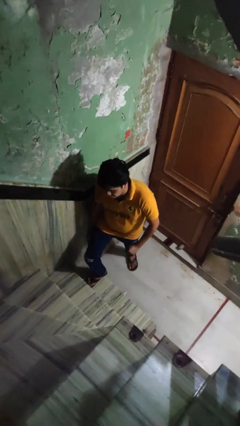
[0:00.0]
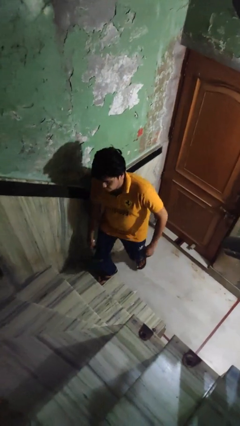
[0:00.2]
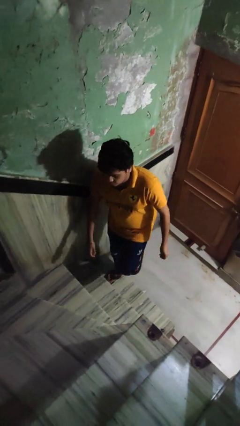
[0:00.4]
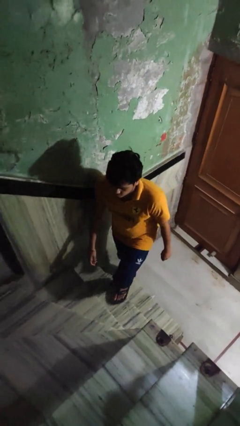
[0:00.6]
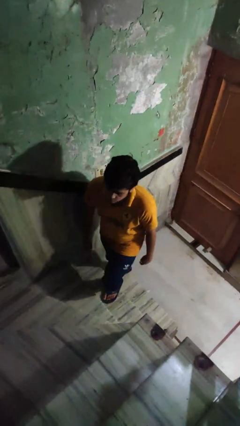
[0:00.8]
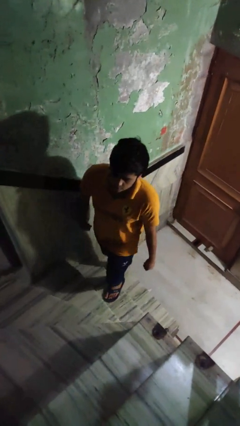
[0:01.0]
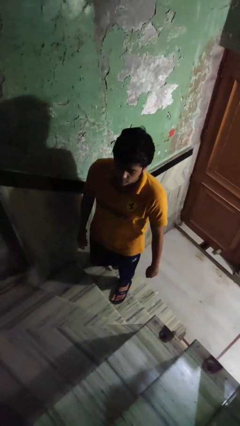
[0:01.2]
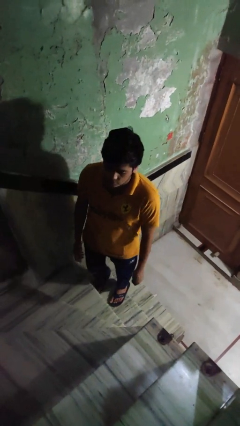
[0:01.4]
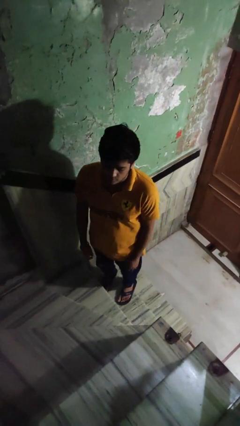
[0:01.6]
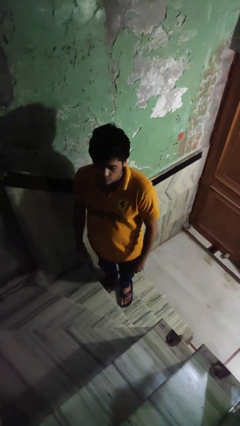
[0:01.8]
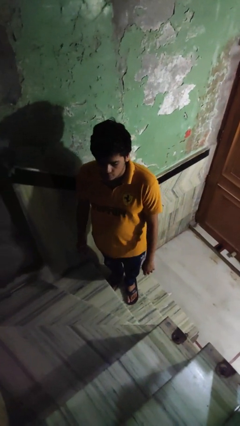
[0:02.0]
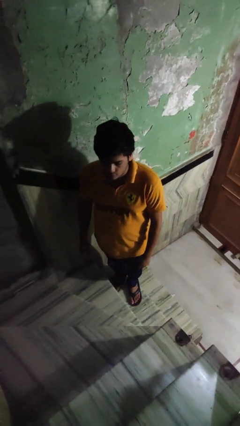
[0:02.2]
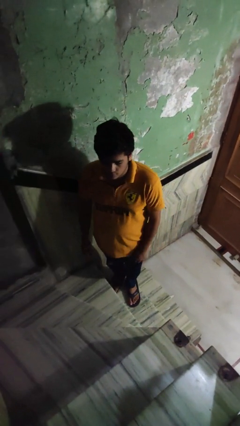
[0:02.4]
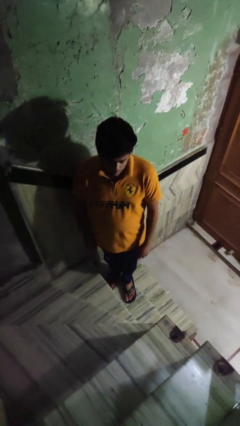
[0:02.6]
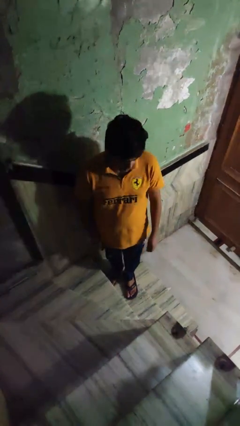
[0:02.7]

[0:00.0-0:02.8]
person climbs up stairs

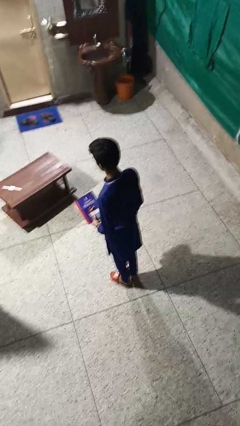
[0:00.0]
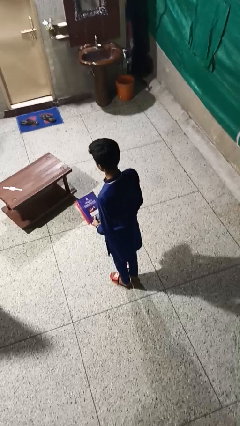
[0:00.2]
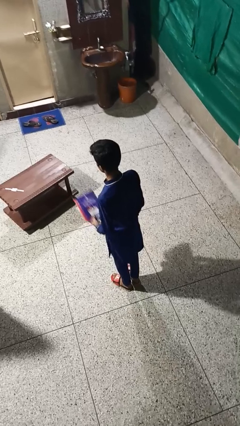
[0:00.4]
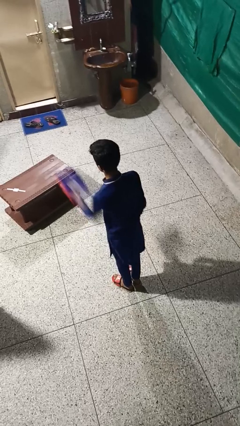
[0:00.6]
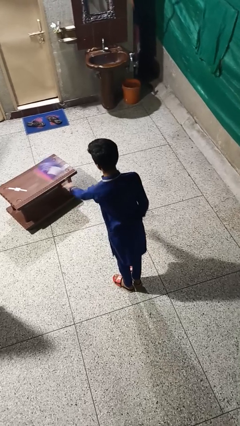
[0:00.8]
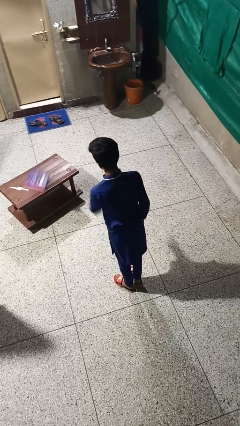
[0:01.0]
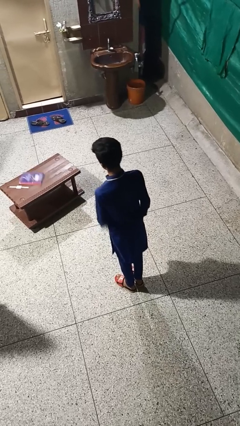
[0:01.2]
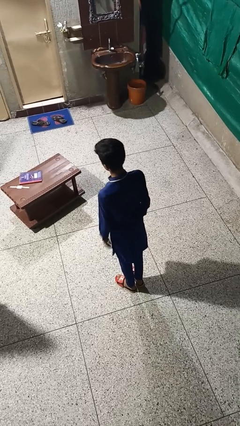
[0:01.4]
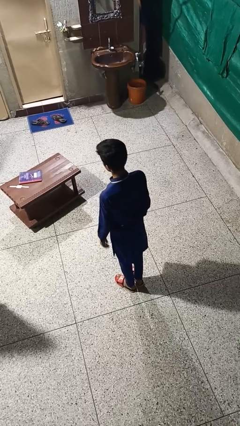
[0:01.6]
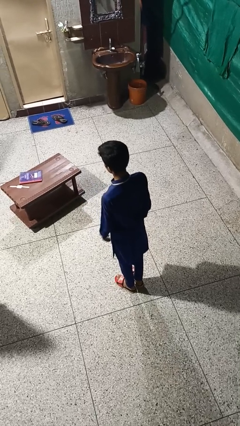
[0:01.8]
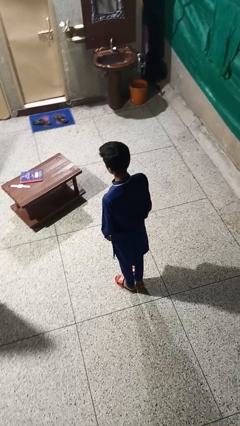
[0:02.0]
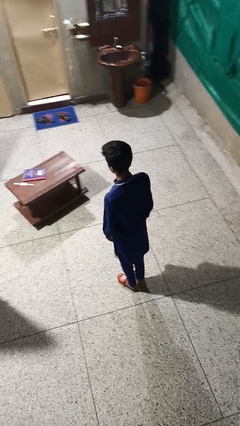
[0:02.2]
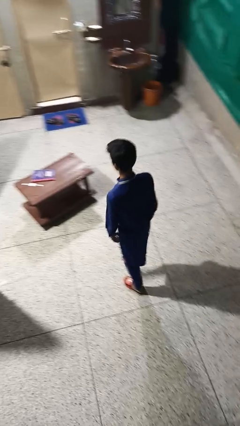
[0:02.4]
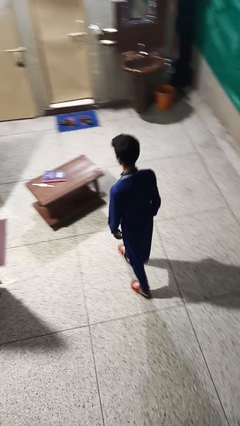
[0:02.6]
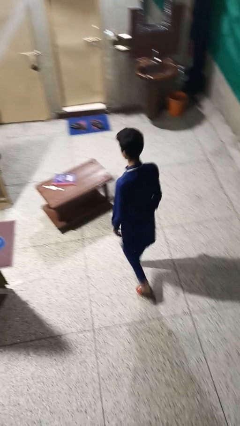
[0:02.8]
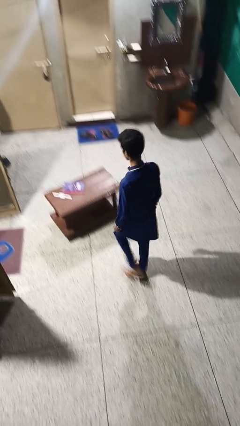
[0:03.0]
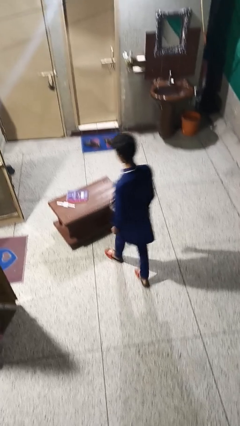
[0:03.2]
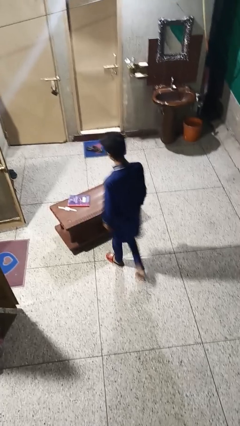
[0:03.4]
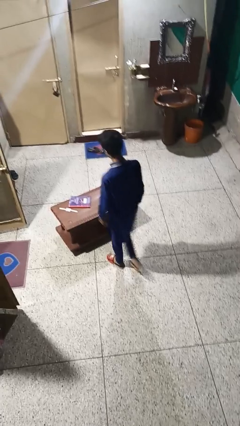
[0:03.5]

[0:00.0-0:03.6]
person throws object on table

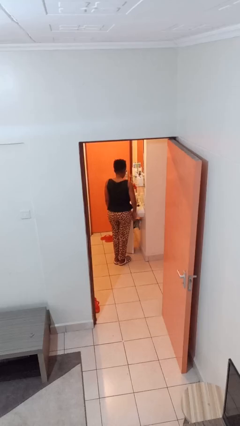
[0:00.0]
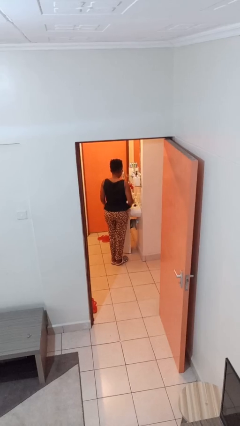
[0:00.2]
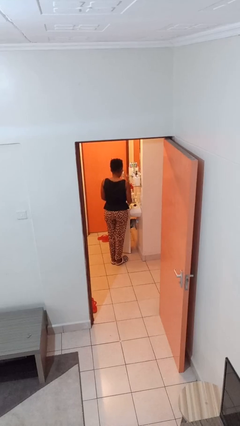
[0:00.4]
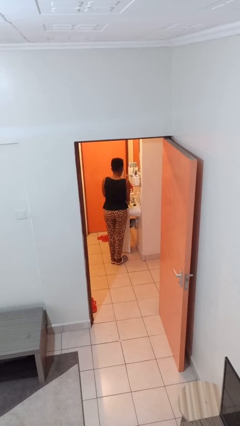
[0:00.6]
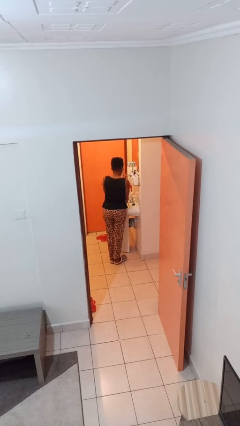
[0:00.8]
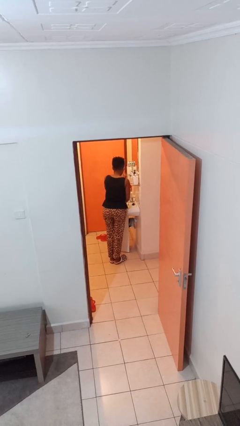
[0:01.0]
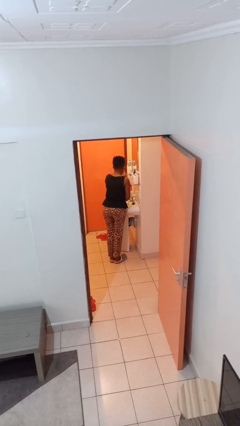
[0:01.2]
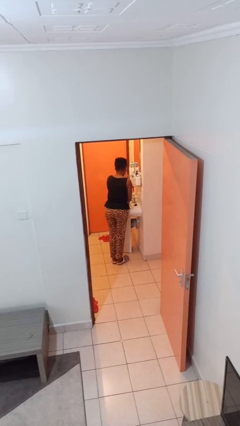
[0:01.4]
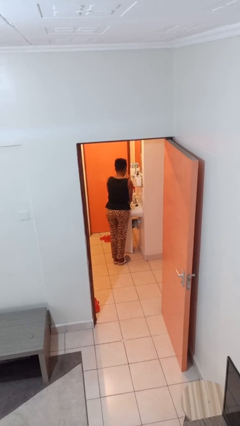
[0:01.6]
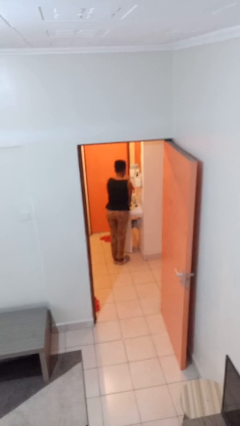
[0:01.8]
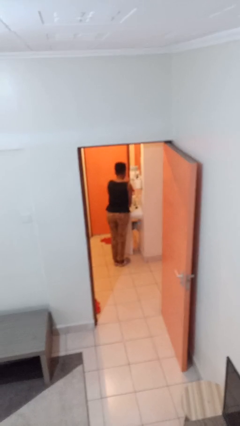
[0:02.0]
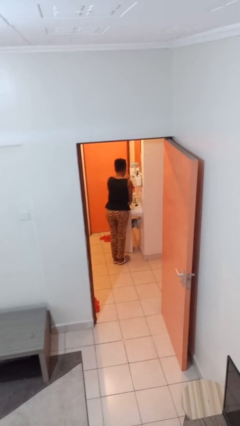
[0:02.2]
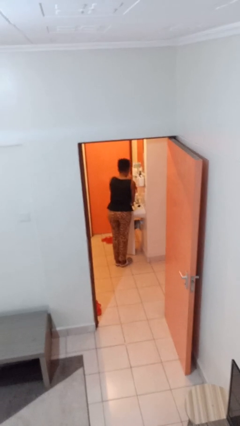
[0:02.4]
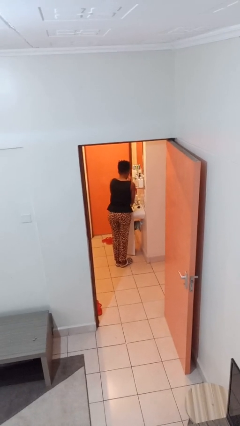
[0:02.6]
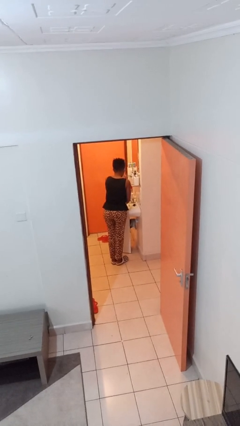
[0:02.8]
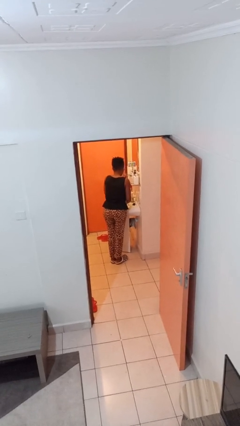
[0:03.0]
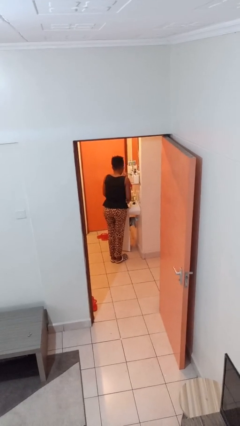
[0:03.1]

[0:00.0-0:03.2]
person washes hands

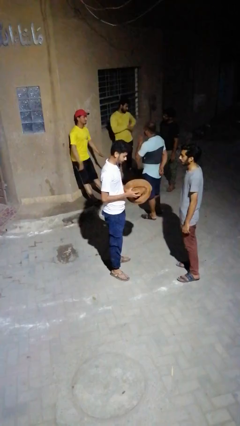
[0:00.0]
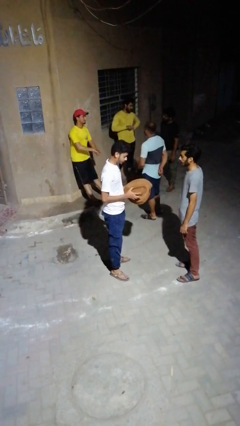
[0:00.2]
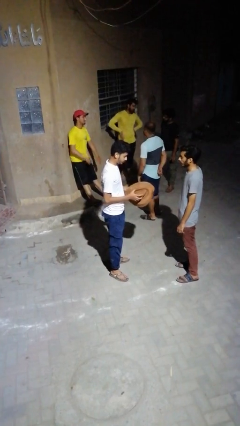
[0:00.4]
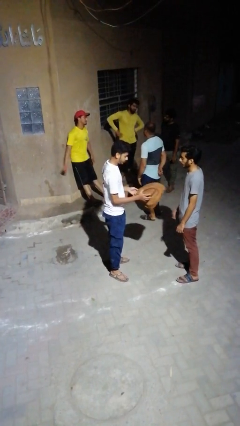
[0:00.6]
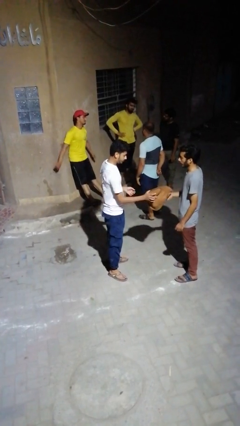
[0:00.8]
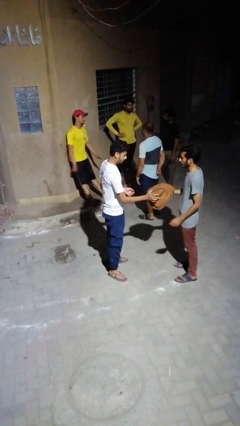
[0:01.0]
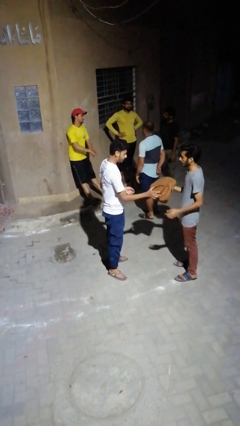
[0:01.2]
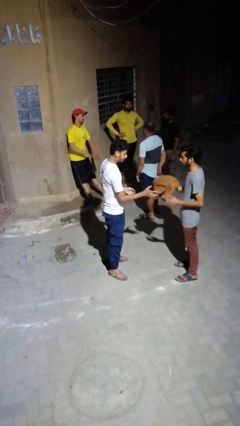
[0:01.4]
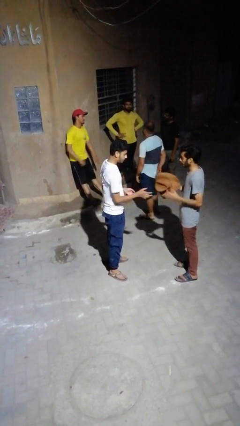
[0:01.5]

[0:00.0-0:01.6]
person transfers object to person

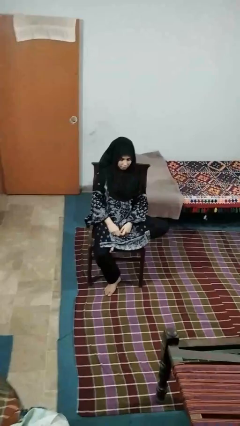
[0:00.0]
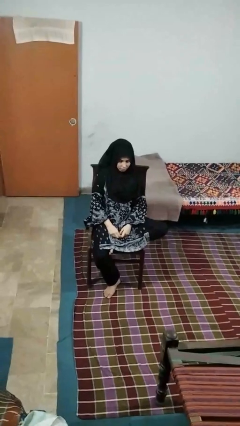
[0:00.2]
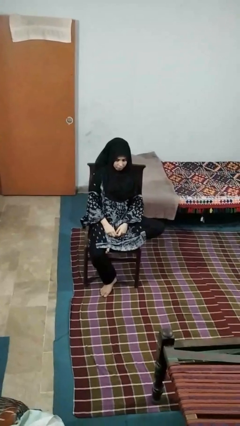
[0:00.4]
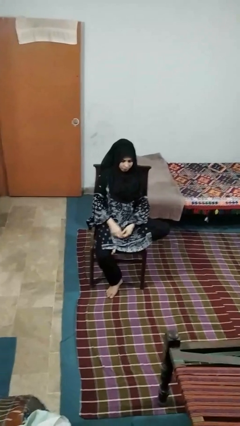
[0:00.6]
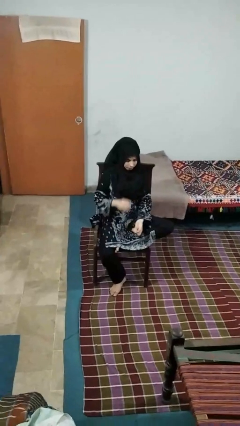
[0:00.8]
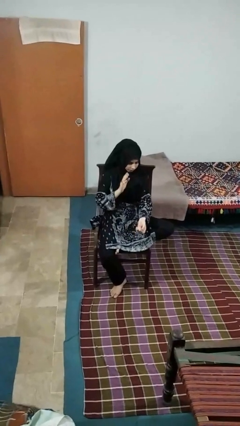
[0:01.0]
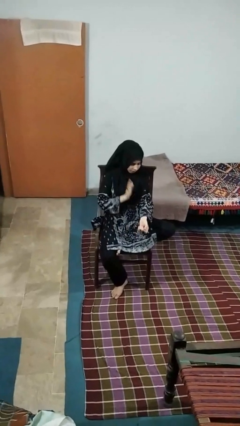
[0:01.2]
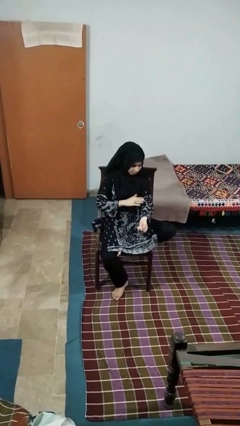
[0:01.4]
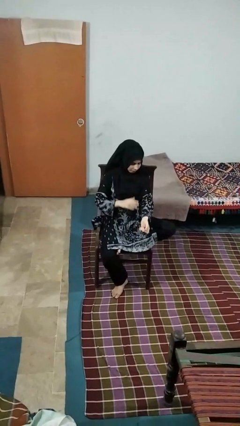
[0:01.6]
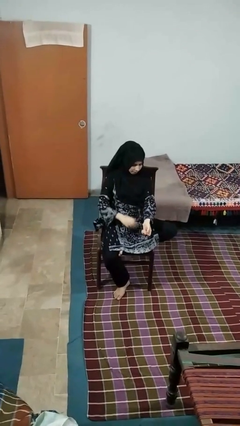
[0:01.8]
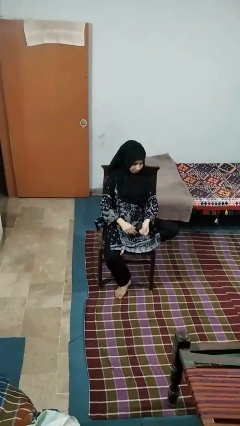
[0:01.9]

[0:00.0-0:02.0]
person swats bug

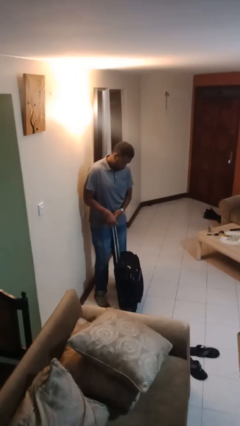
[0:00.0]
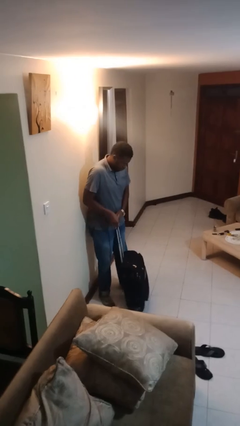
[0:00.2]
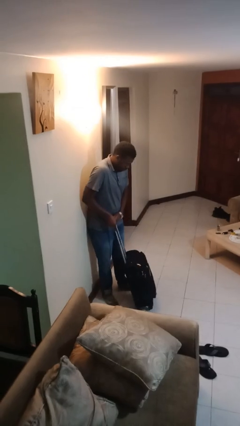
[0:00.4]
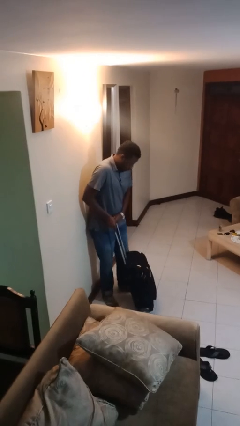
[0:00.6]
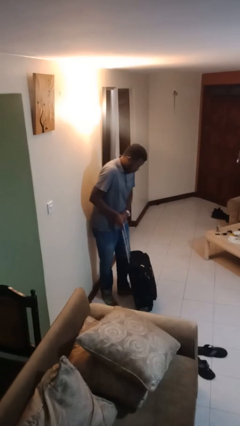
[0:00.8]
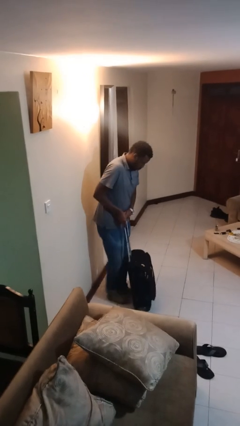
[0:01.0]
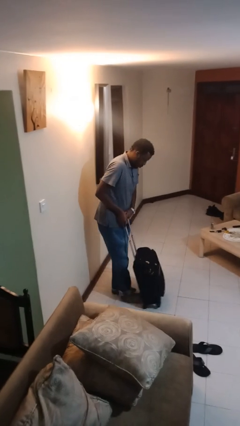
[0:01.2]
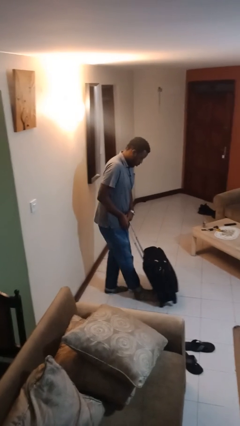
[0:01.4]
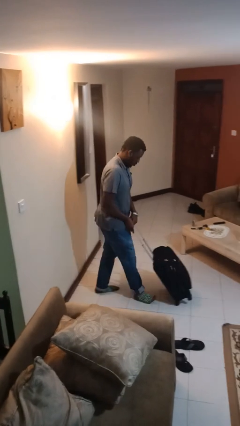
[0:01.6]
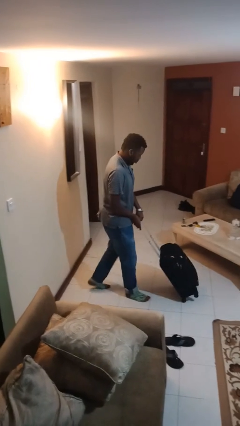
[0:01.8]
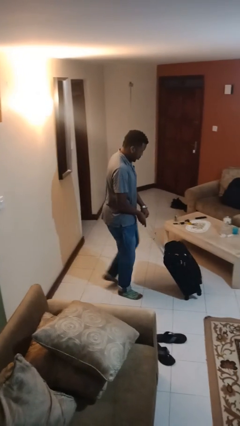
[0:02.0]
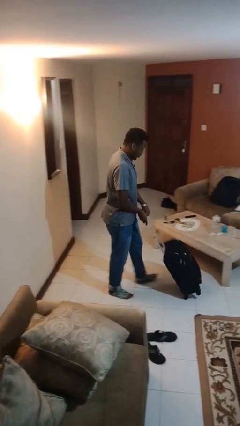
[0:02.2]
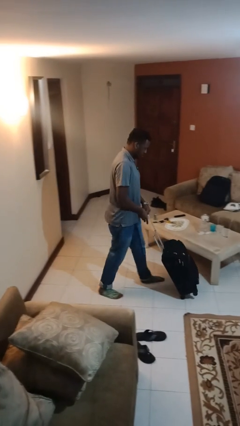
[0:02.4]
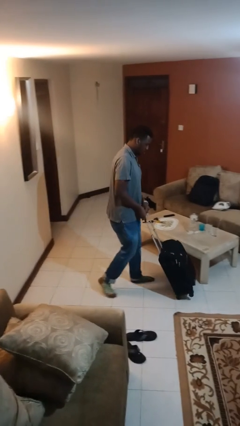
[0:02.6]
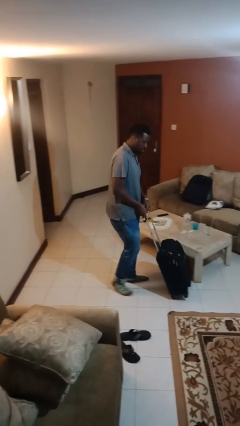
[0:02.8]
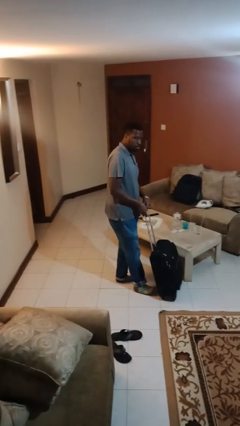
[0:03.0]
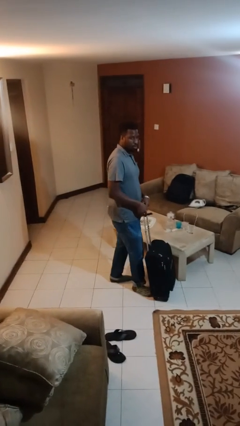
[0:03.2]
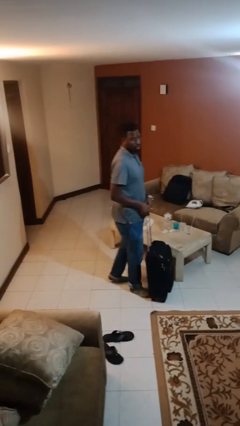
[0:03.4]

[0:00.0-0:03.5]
person pushes wheeled cart

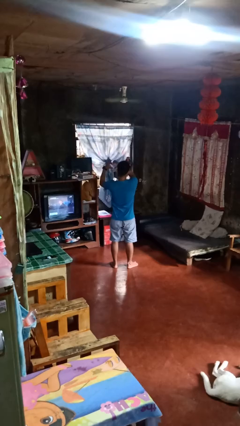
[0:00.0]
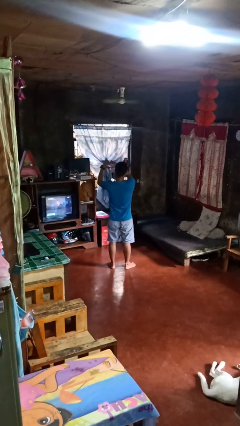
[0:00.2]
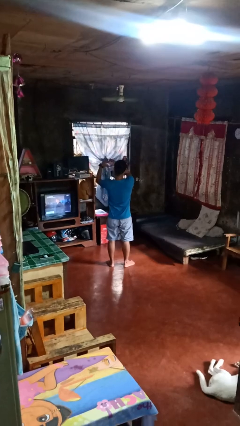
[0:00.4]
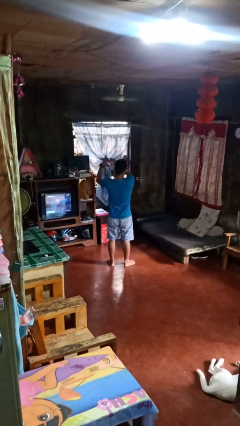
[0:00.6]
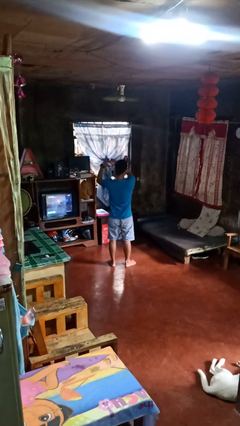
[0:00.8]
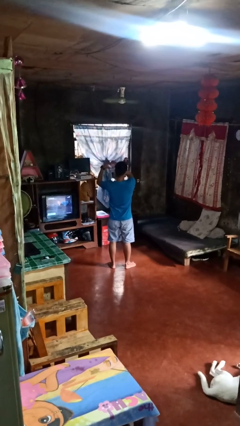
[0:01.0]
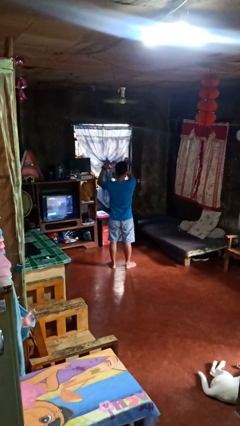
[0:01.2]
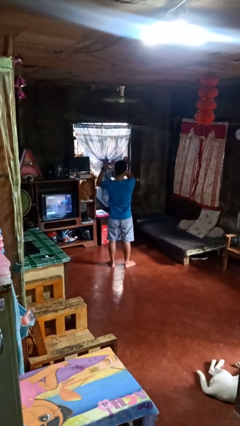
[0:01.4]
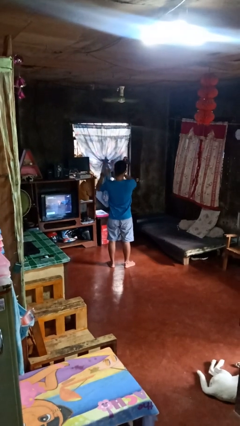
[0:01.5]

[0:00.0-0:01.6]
person gestures heart
